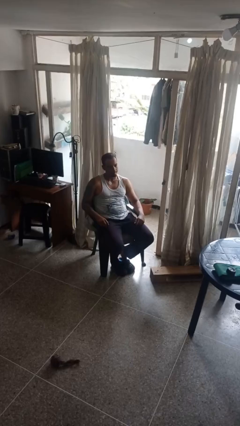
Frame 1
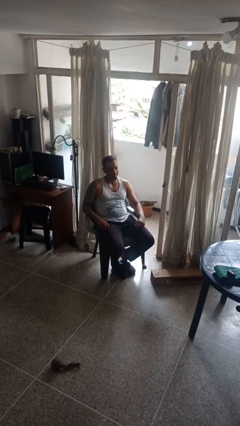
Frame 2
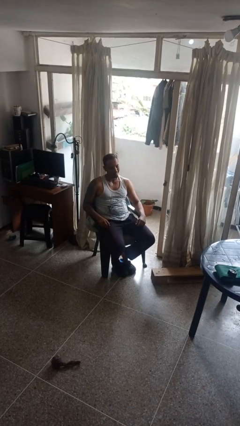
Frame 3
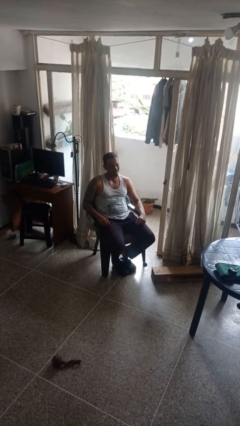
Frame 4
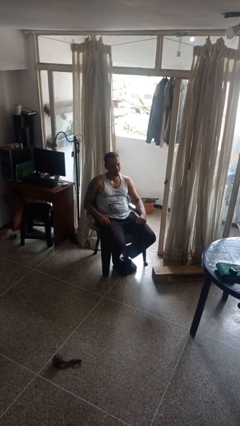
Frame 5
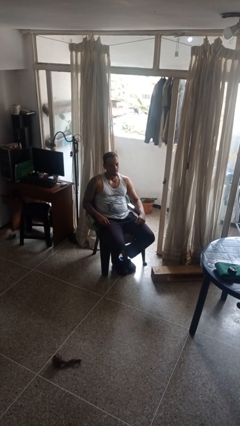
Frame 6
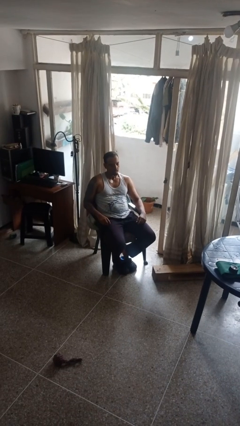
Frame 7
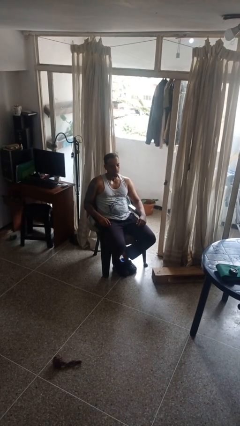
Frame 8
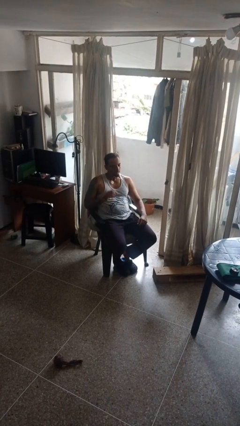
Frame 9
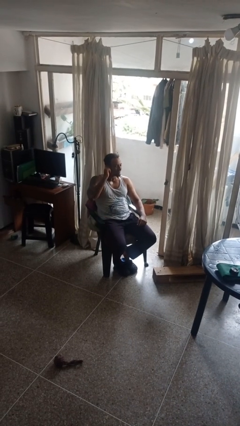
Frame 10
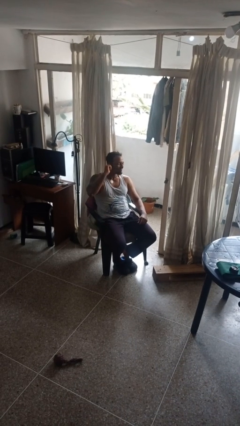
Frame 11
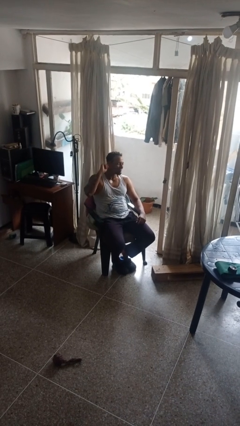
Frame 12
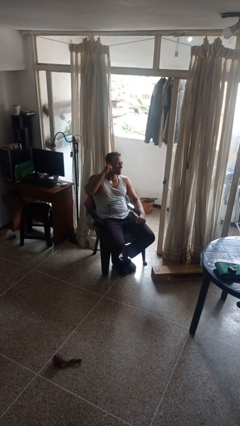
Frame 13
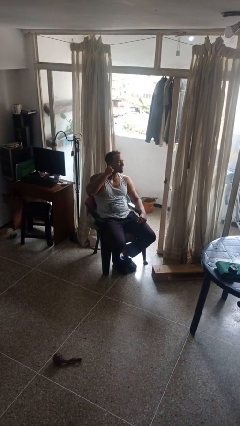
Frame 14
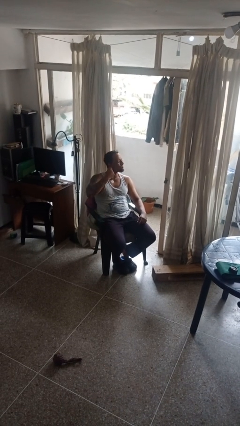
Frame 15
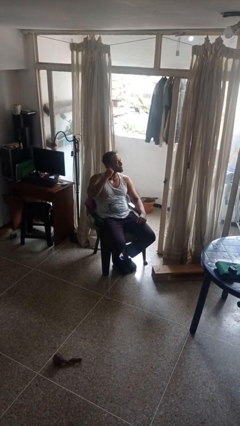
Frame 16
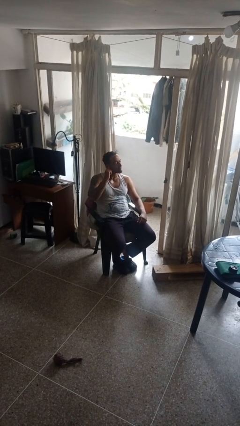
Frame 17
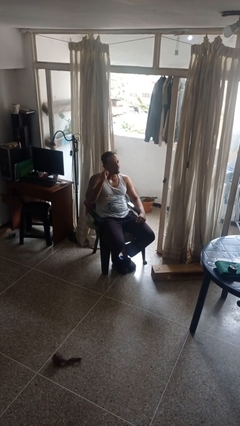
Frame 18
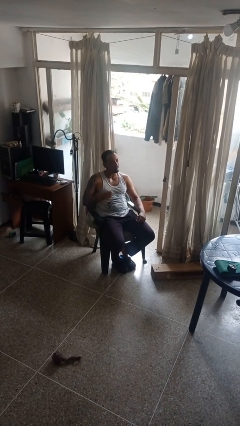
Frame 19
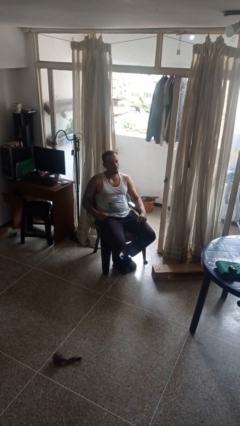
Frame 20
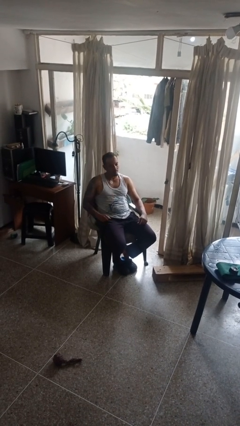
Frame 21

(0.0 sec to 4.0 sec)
person touches earlobe

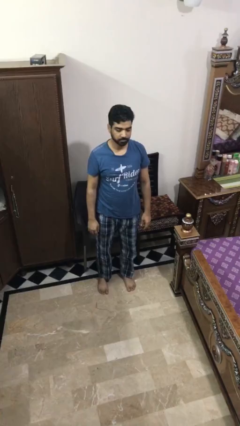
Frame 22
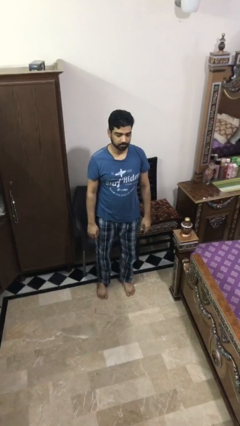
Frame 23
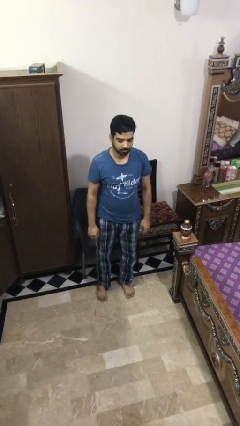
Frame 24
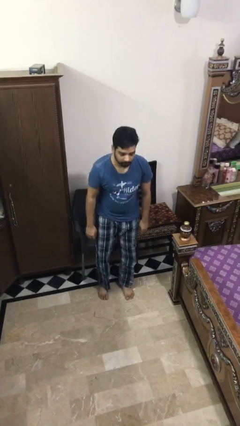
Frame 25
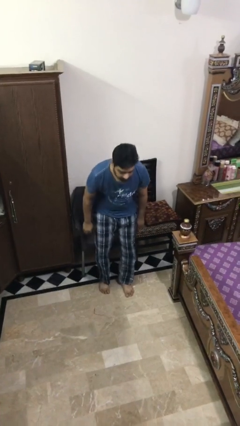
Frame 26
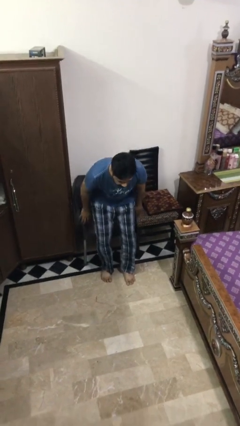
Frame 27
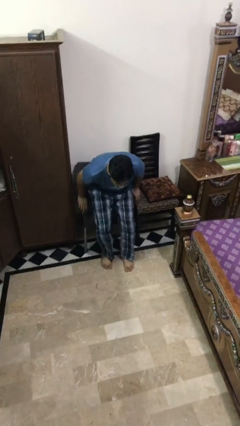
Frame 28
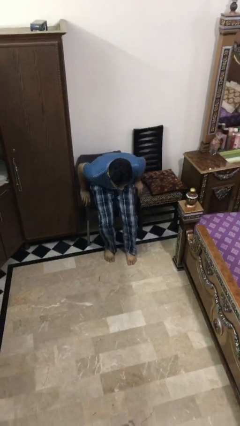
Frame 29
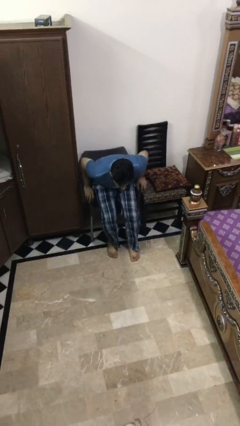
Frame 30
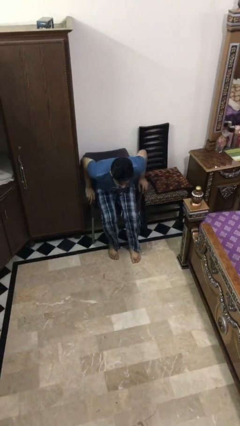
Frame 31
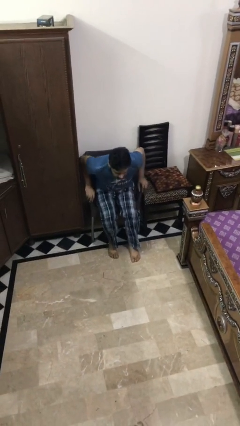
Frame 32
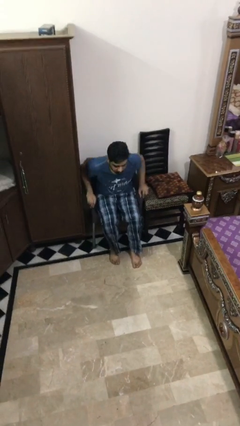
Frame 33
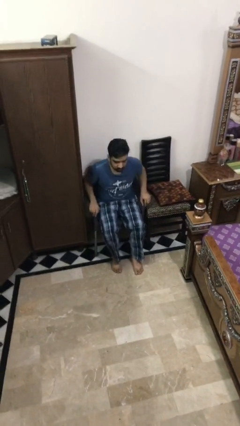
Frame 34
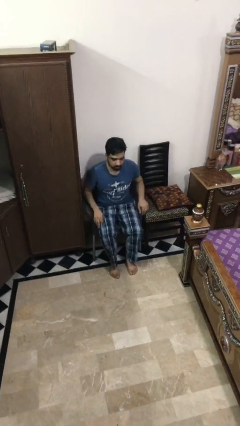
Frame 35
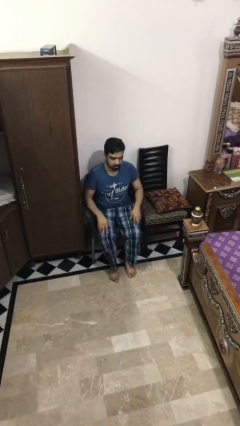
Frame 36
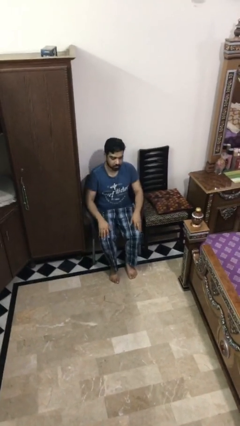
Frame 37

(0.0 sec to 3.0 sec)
person sits down

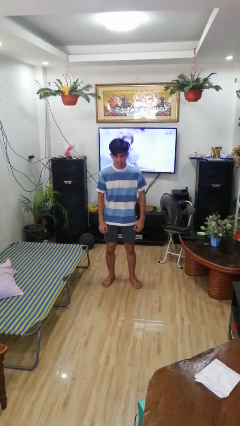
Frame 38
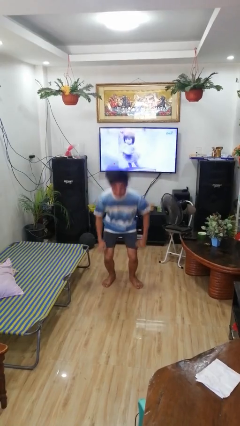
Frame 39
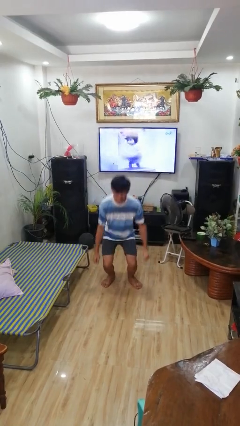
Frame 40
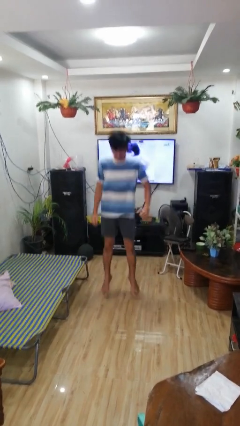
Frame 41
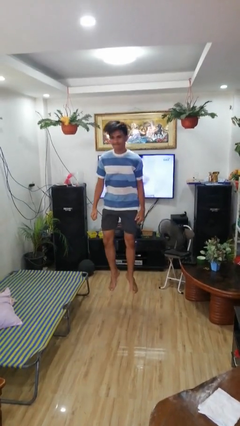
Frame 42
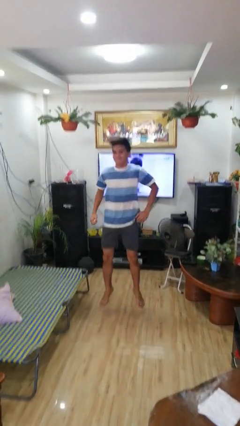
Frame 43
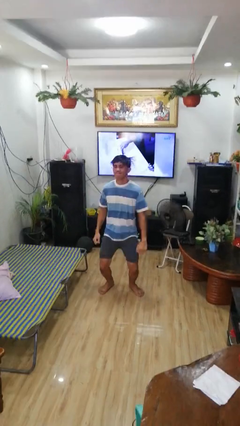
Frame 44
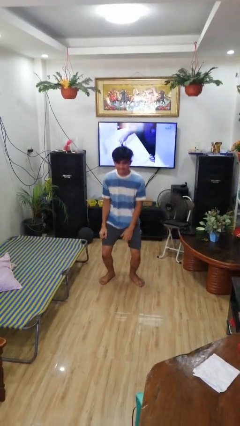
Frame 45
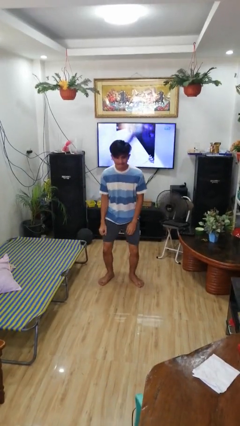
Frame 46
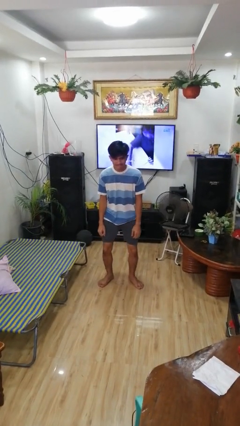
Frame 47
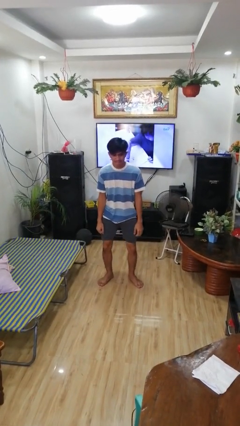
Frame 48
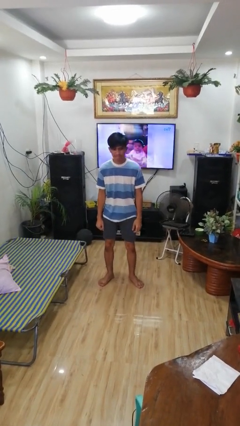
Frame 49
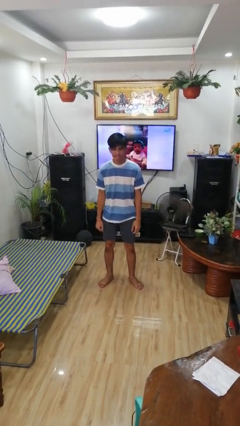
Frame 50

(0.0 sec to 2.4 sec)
person jumps

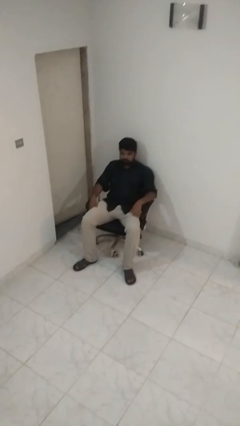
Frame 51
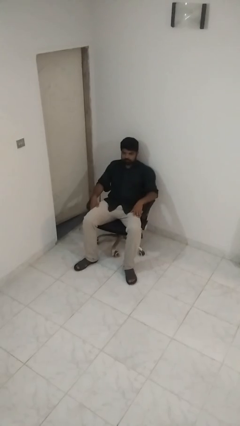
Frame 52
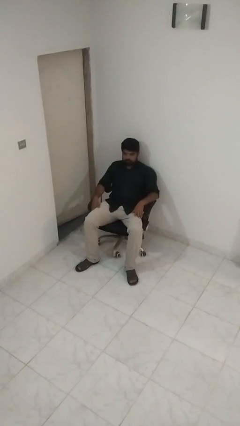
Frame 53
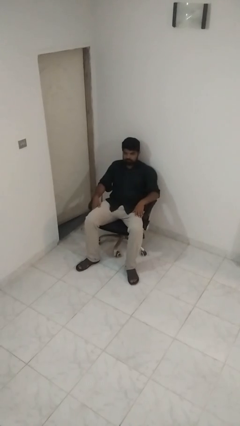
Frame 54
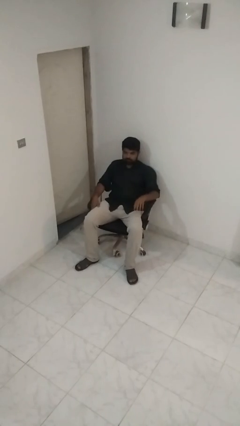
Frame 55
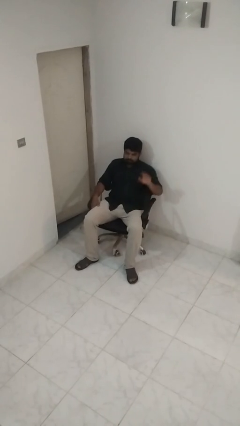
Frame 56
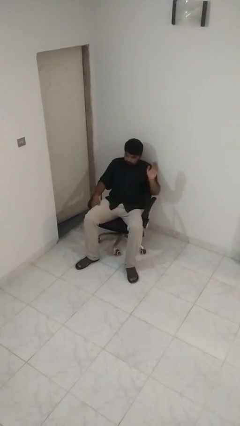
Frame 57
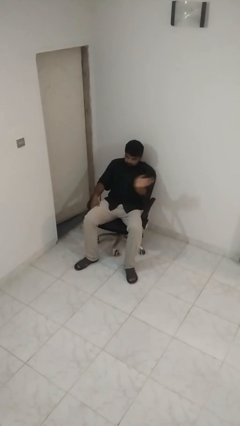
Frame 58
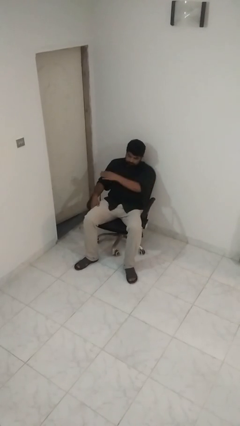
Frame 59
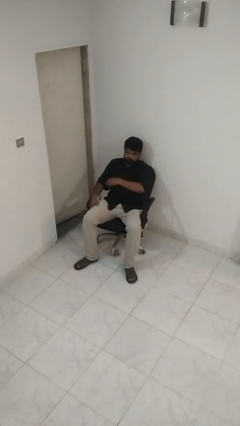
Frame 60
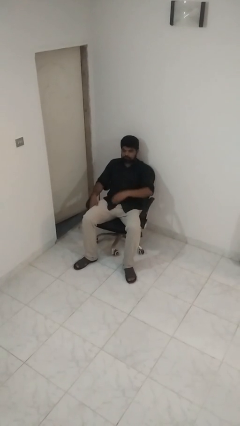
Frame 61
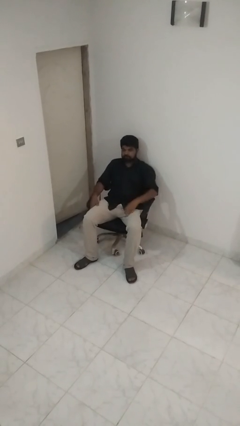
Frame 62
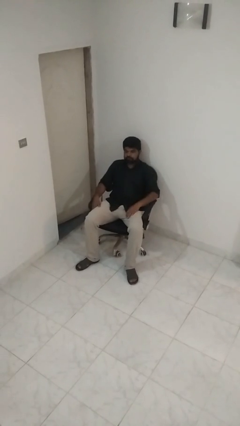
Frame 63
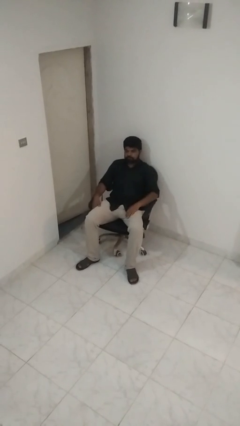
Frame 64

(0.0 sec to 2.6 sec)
person gestures swipe right

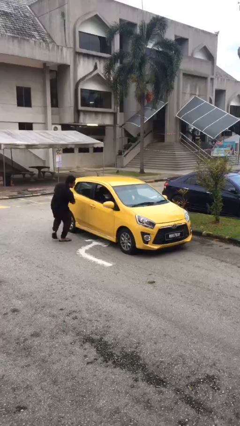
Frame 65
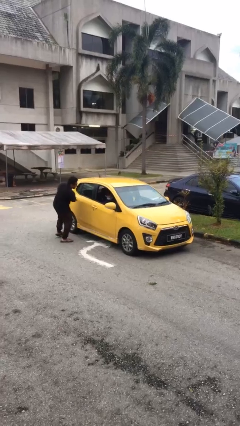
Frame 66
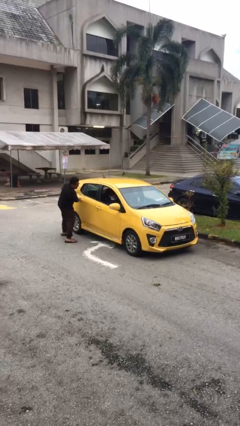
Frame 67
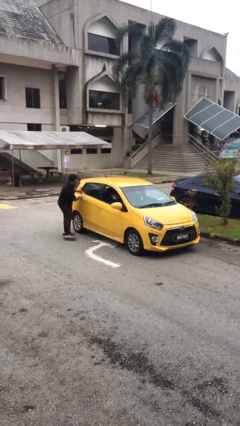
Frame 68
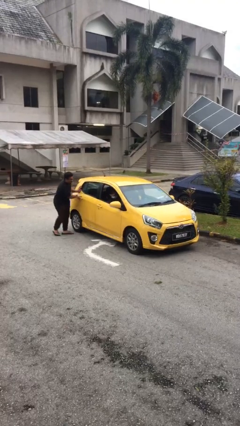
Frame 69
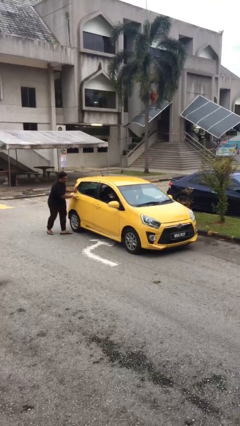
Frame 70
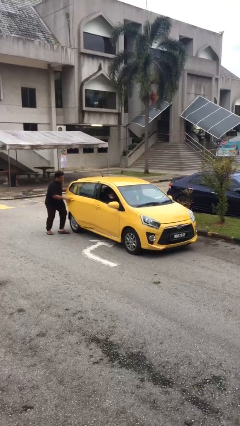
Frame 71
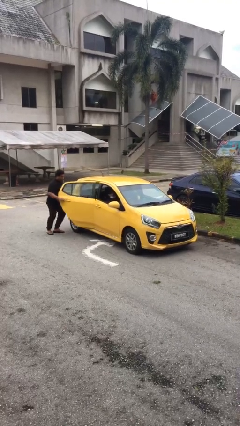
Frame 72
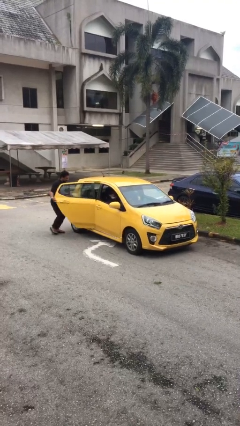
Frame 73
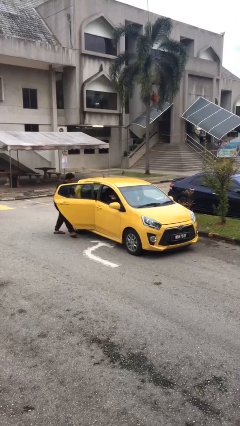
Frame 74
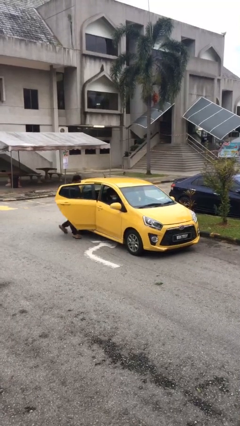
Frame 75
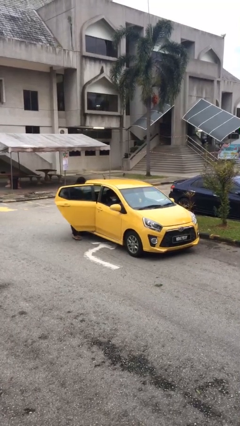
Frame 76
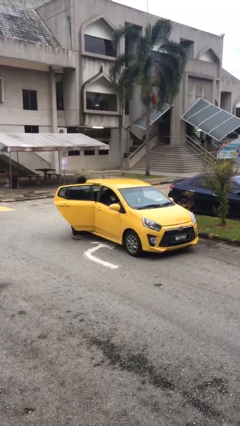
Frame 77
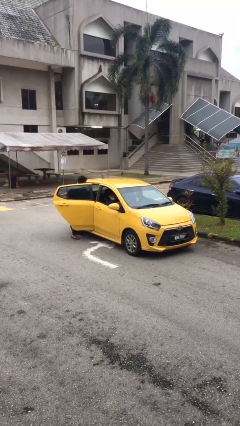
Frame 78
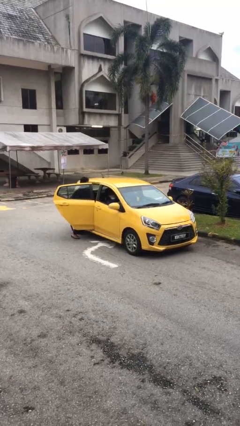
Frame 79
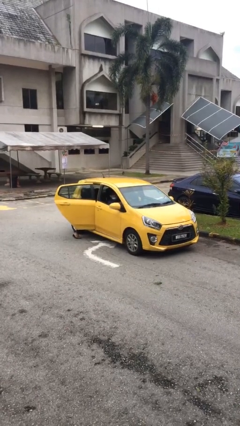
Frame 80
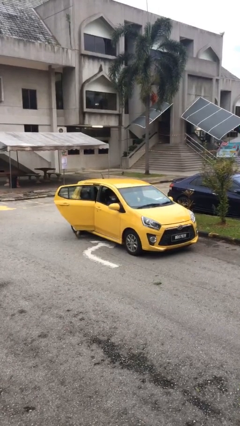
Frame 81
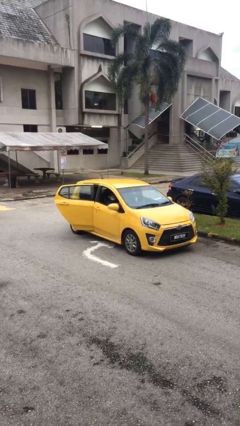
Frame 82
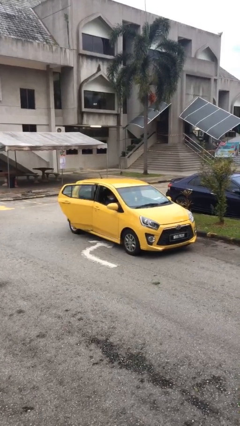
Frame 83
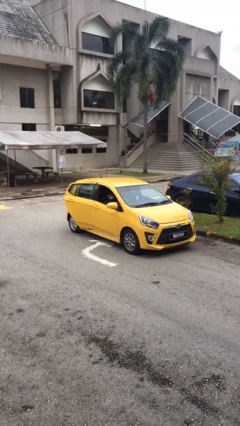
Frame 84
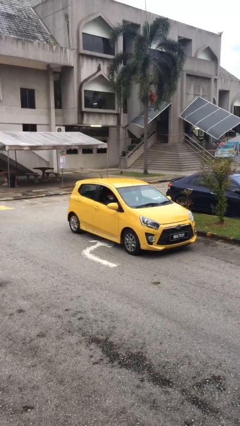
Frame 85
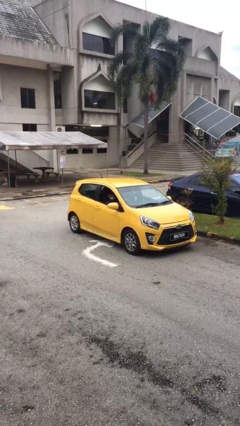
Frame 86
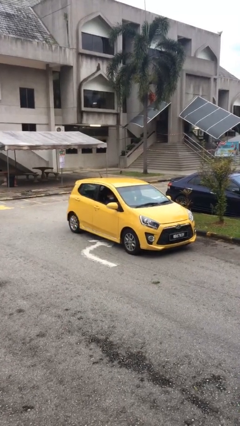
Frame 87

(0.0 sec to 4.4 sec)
car picks up person

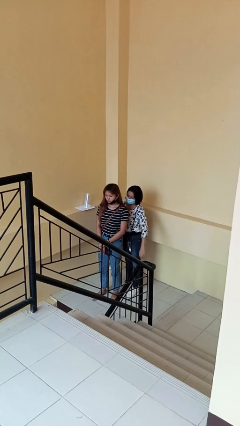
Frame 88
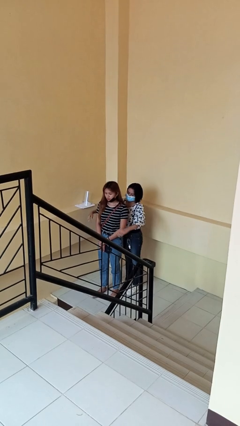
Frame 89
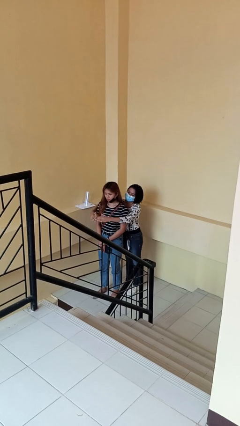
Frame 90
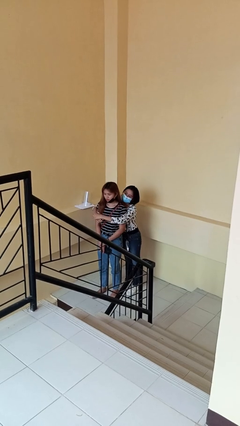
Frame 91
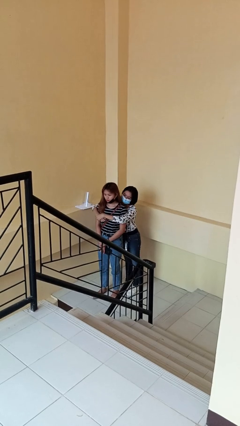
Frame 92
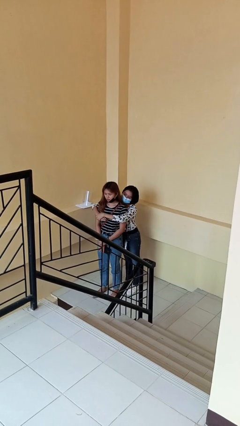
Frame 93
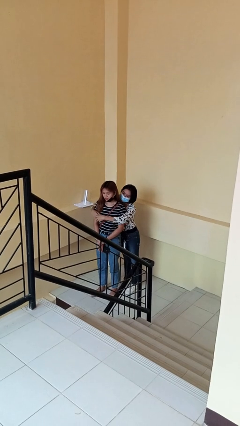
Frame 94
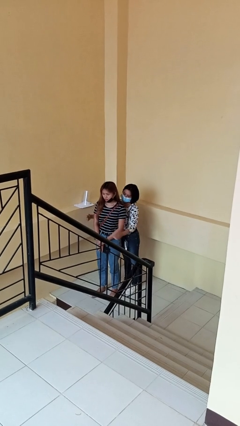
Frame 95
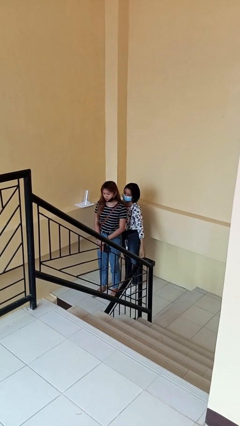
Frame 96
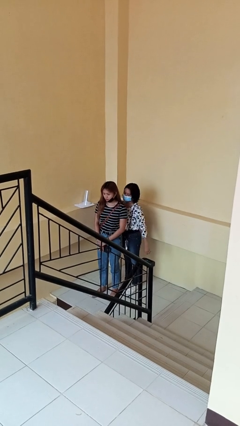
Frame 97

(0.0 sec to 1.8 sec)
person hugs person from behind
